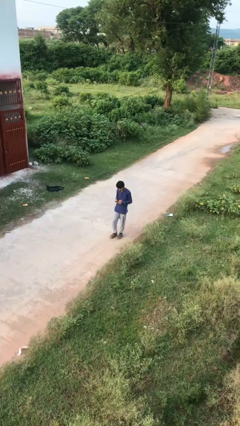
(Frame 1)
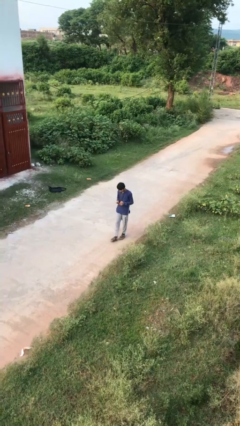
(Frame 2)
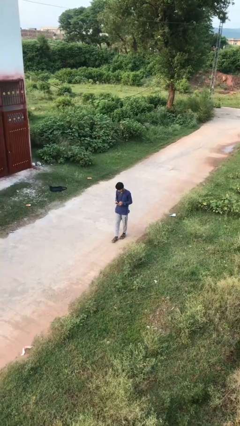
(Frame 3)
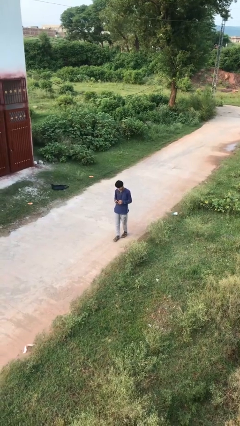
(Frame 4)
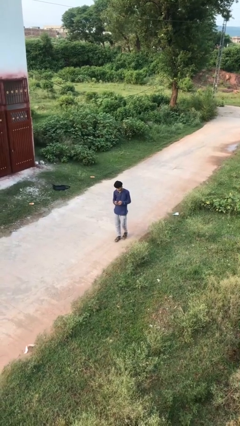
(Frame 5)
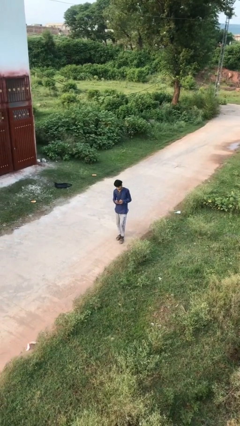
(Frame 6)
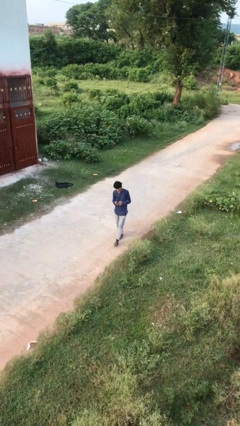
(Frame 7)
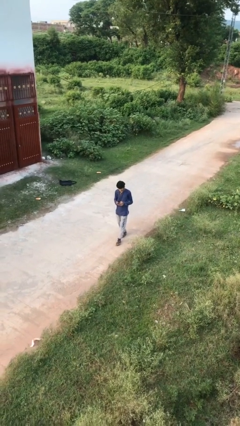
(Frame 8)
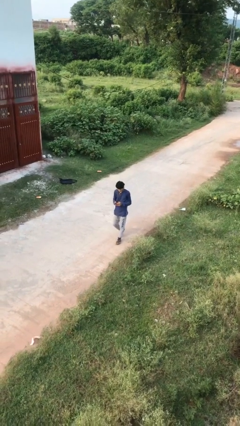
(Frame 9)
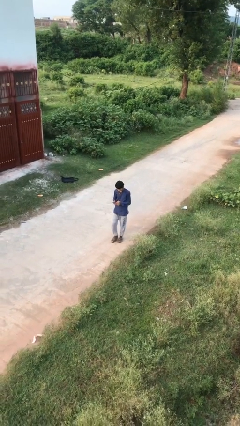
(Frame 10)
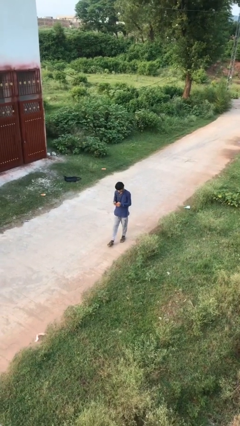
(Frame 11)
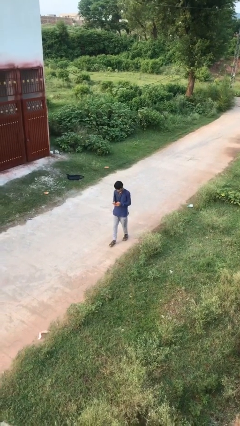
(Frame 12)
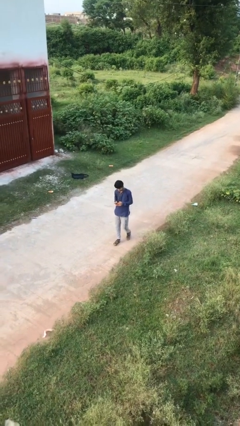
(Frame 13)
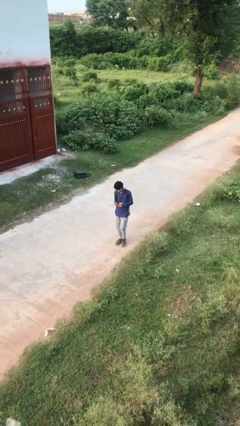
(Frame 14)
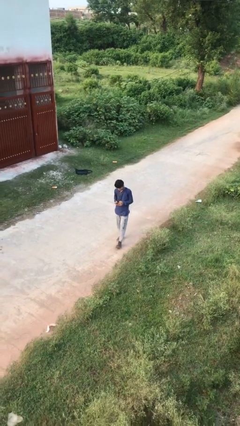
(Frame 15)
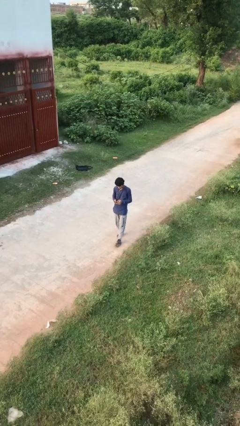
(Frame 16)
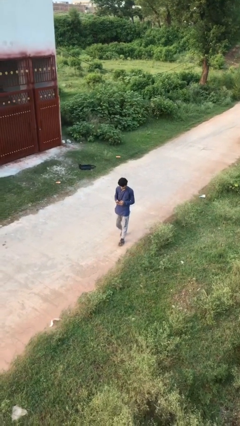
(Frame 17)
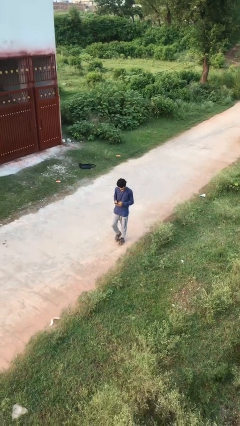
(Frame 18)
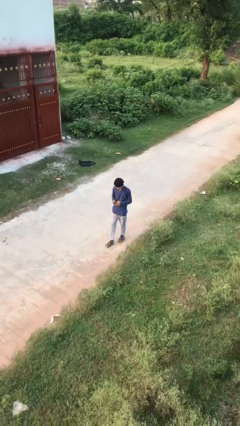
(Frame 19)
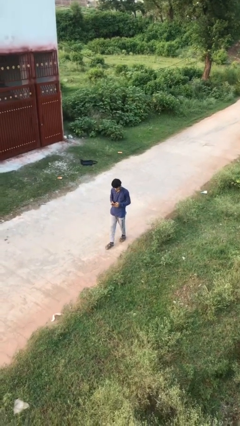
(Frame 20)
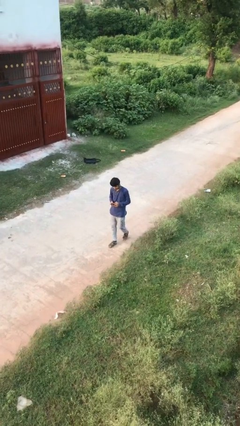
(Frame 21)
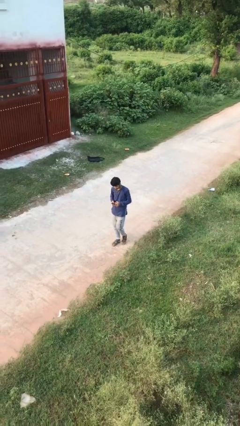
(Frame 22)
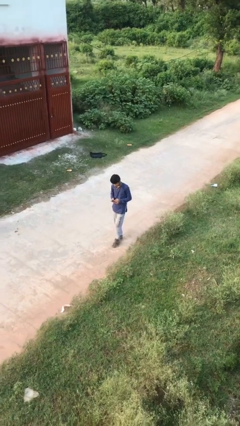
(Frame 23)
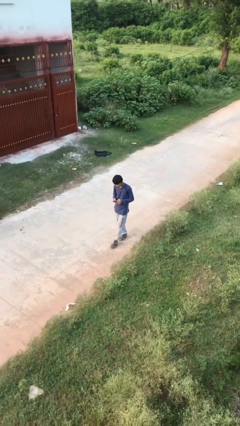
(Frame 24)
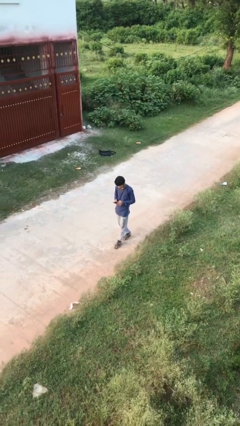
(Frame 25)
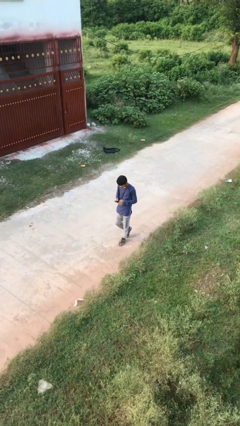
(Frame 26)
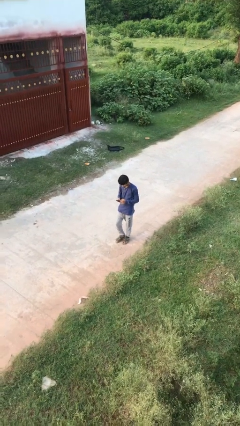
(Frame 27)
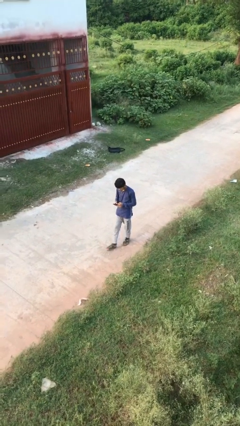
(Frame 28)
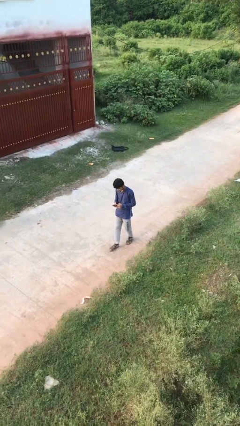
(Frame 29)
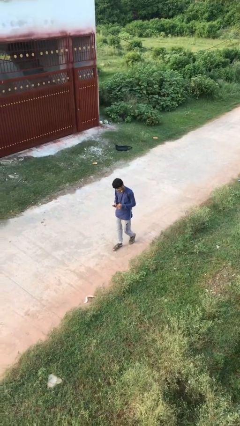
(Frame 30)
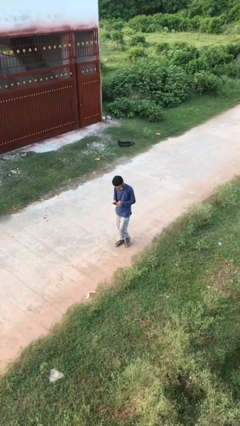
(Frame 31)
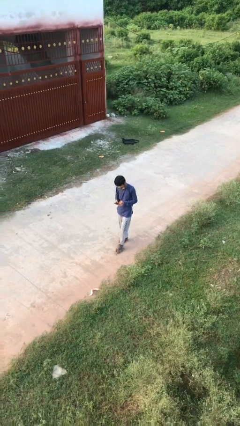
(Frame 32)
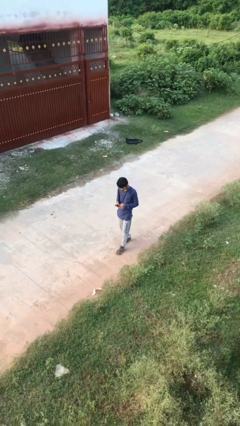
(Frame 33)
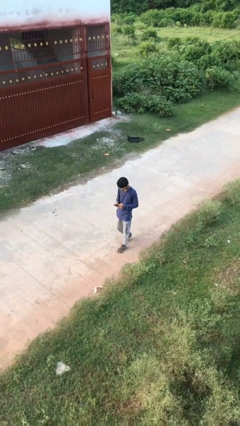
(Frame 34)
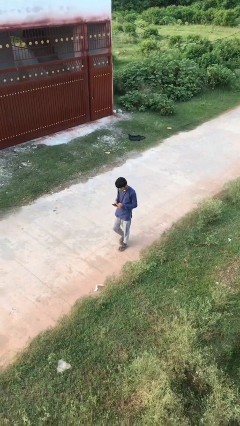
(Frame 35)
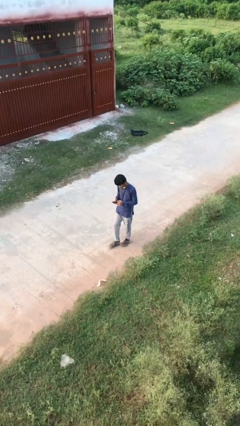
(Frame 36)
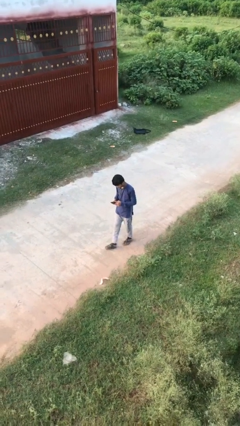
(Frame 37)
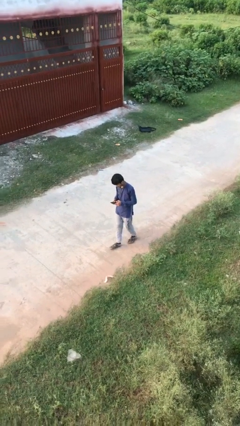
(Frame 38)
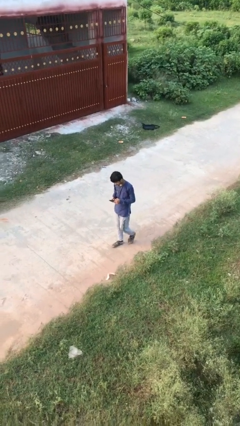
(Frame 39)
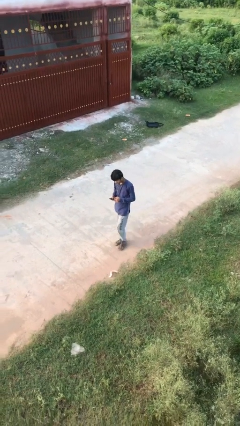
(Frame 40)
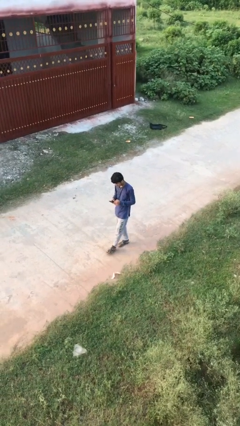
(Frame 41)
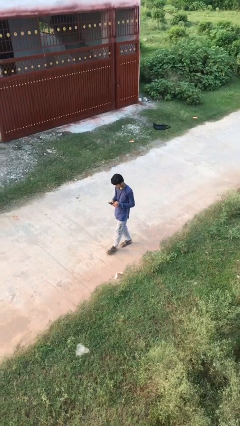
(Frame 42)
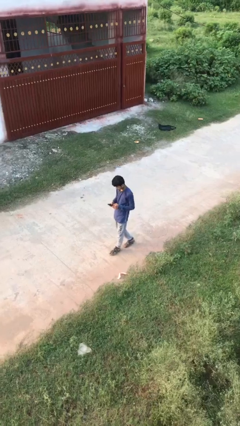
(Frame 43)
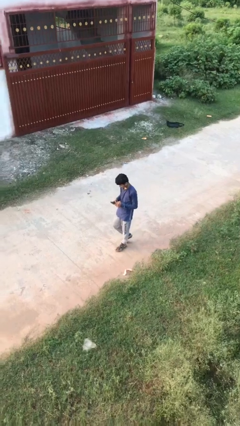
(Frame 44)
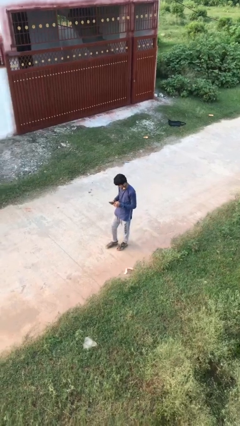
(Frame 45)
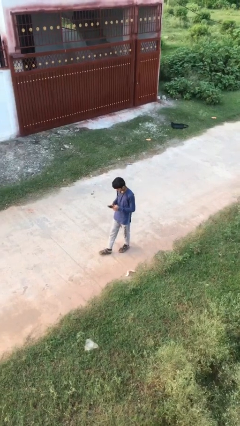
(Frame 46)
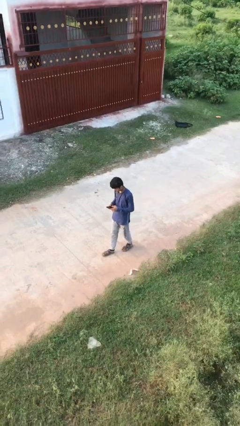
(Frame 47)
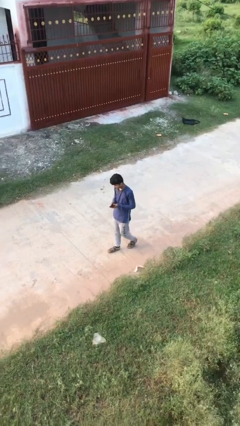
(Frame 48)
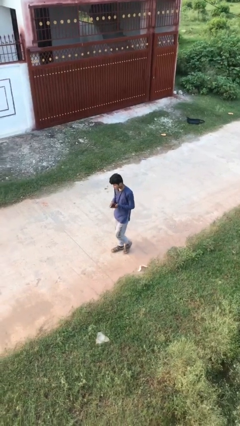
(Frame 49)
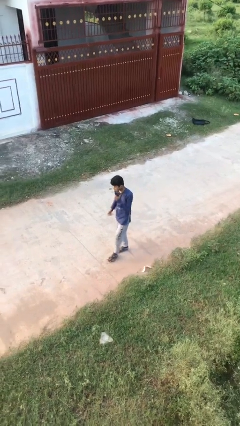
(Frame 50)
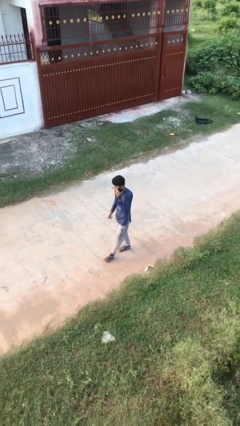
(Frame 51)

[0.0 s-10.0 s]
person texts on phone

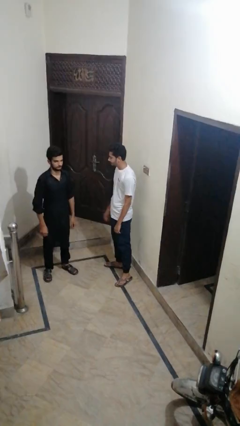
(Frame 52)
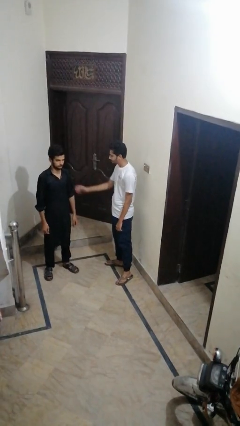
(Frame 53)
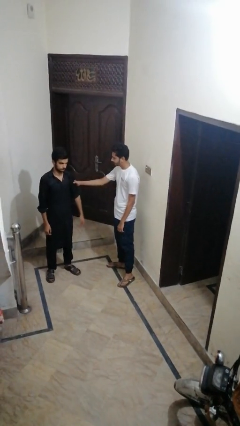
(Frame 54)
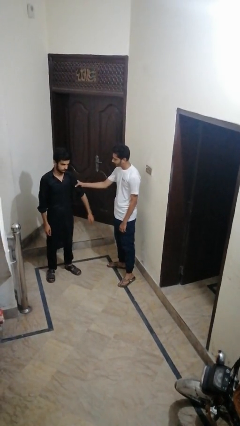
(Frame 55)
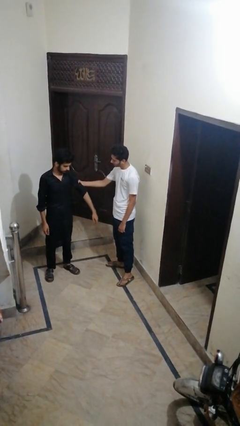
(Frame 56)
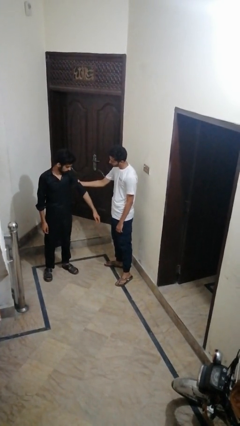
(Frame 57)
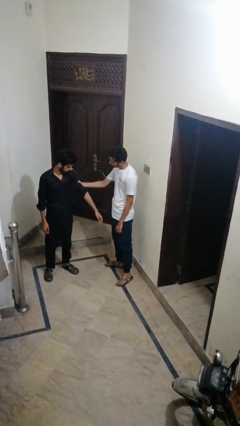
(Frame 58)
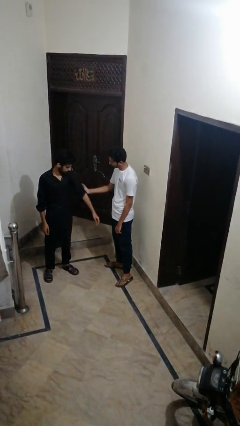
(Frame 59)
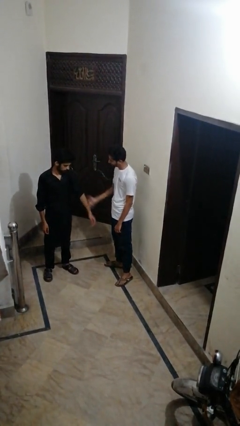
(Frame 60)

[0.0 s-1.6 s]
person grabs person by bicep

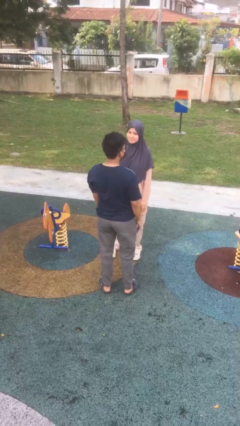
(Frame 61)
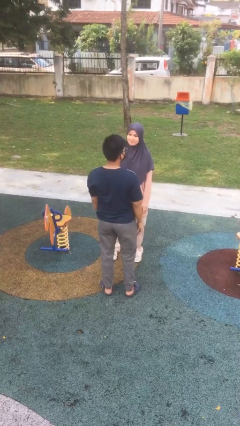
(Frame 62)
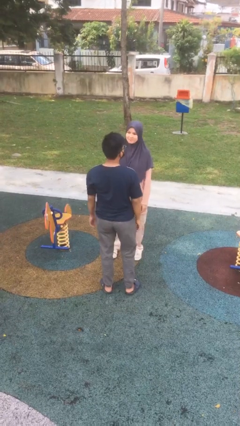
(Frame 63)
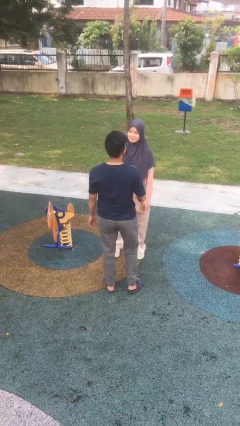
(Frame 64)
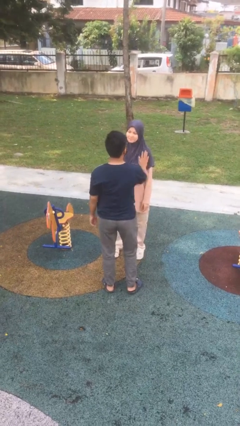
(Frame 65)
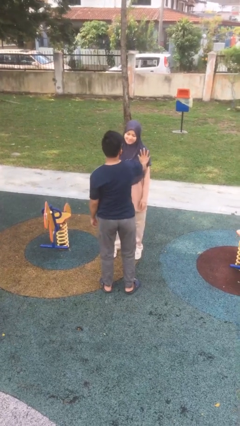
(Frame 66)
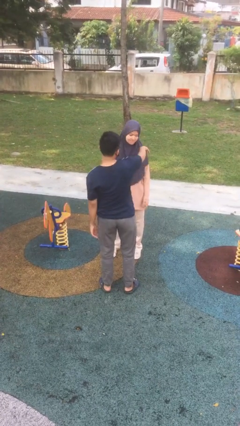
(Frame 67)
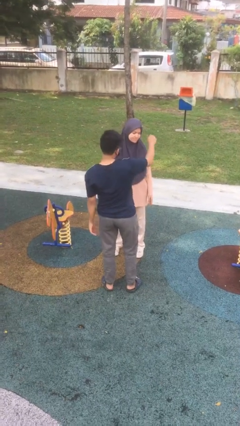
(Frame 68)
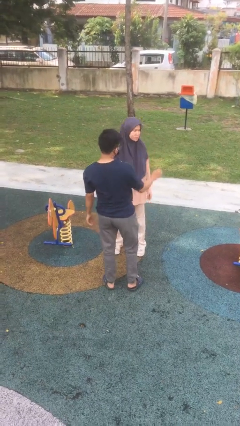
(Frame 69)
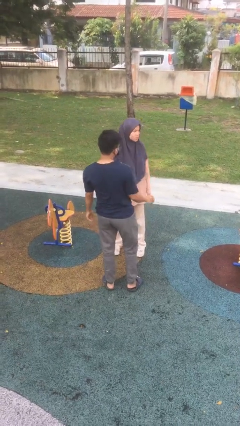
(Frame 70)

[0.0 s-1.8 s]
person shoves person

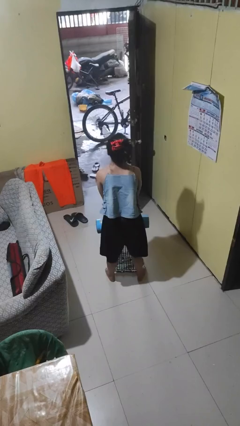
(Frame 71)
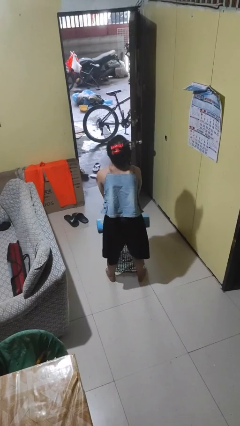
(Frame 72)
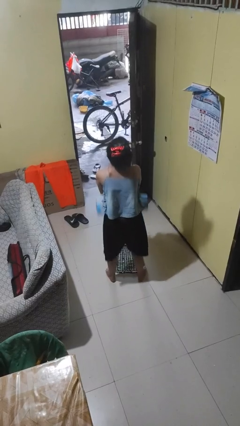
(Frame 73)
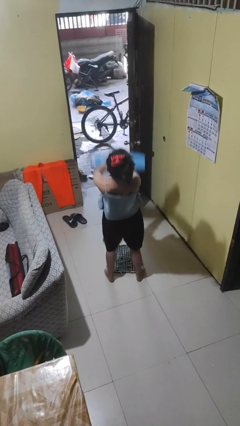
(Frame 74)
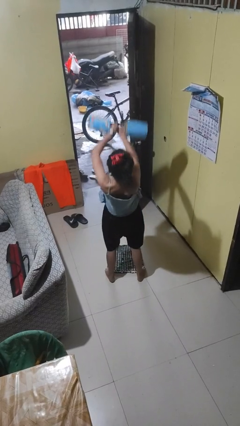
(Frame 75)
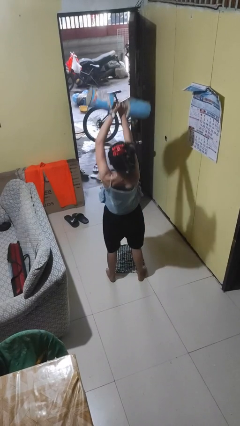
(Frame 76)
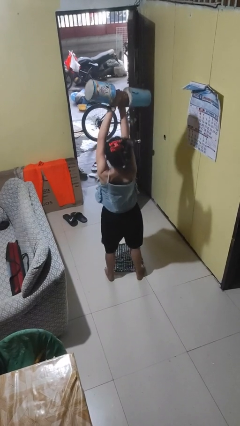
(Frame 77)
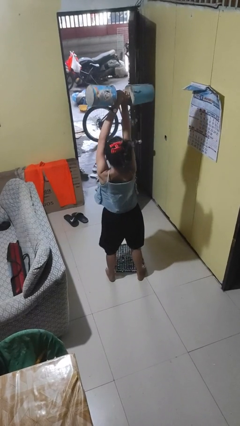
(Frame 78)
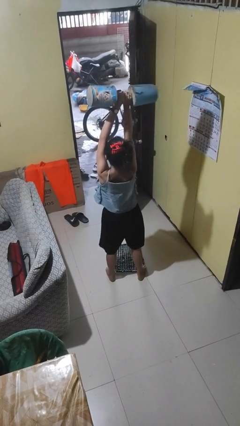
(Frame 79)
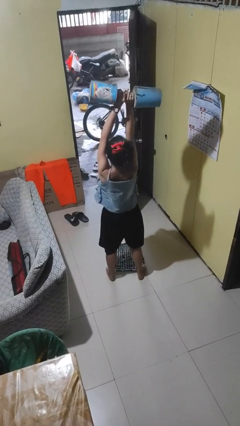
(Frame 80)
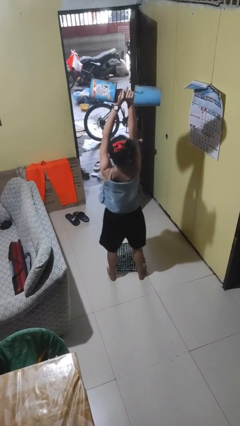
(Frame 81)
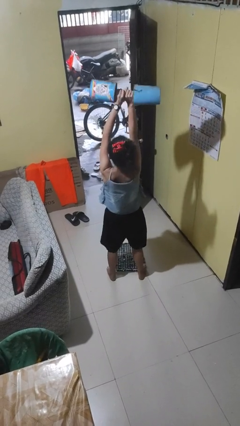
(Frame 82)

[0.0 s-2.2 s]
person lifts dumbbells

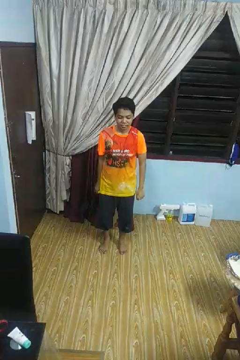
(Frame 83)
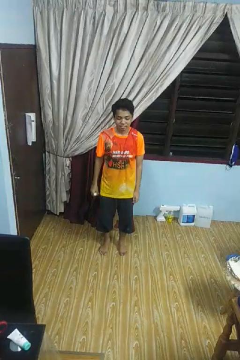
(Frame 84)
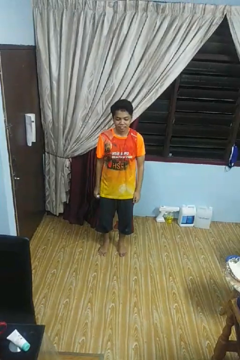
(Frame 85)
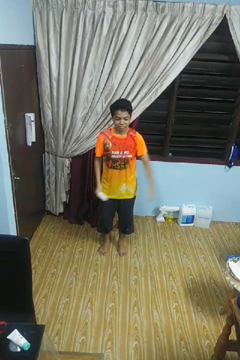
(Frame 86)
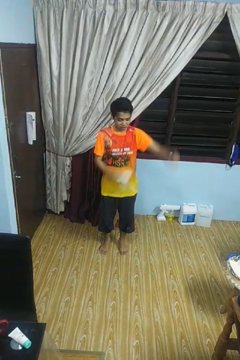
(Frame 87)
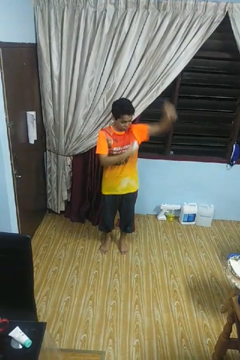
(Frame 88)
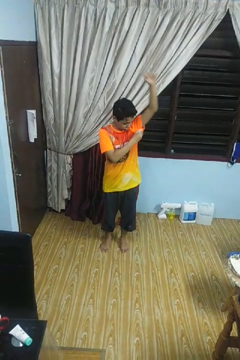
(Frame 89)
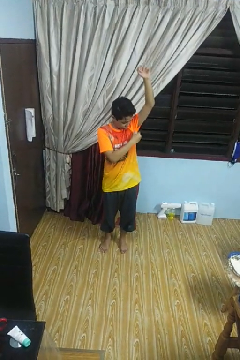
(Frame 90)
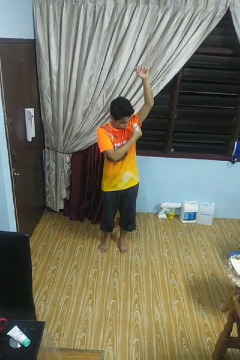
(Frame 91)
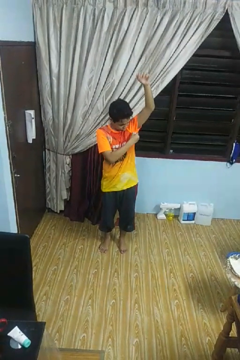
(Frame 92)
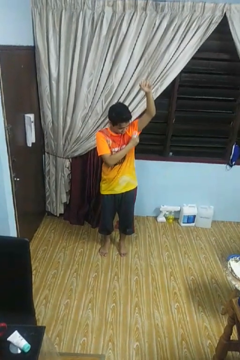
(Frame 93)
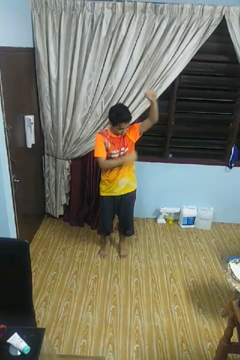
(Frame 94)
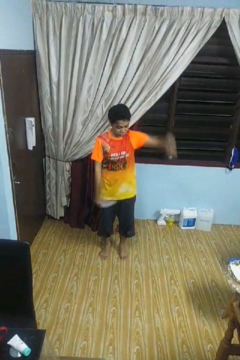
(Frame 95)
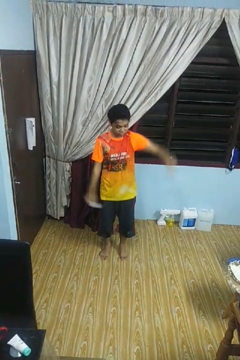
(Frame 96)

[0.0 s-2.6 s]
person applies deodorant
